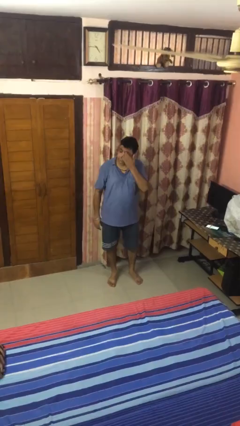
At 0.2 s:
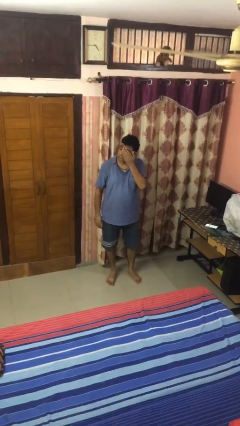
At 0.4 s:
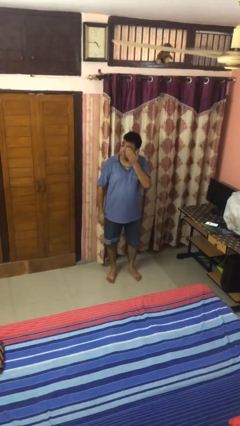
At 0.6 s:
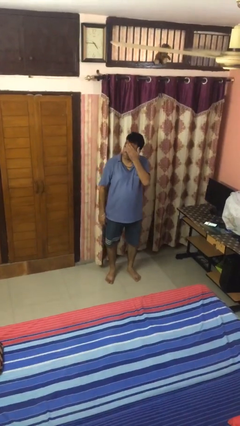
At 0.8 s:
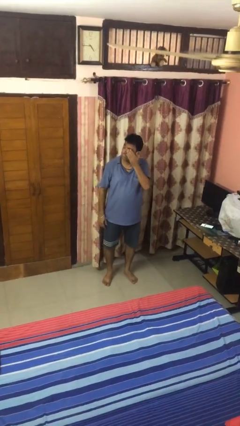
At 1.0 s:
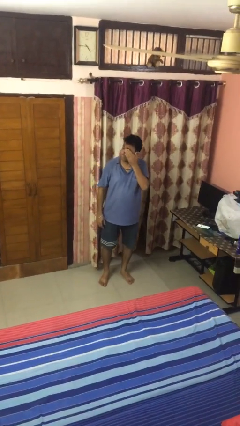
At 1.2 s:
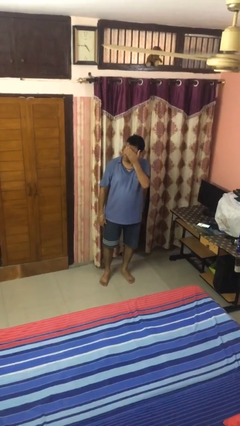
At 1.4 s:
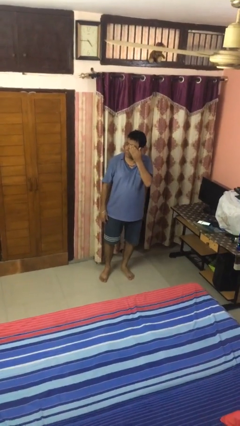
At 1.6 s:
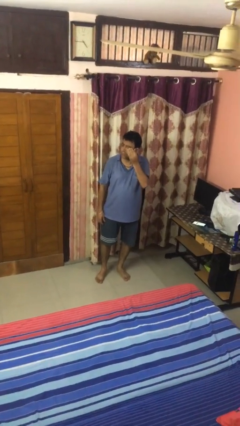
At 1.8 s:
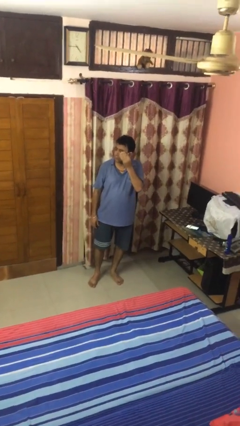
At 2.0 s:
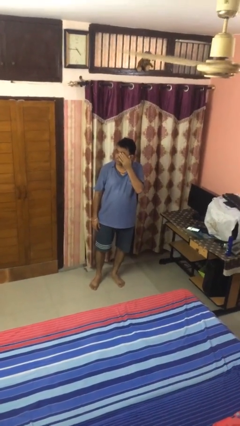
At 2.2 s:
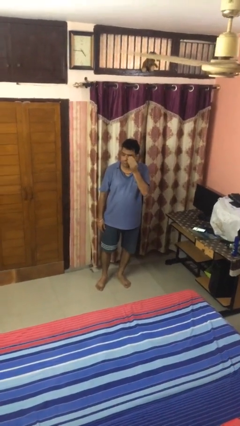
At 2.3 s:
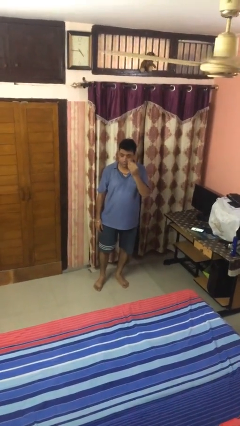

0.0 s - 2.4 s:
person rubs eyes

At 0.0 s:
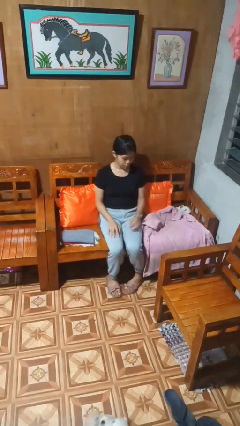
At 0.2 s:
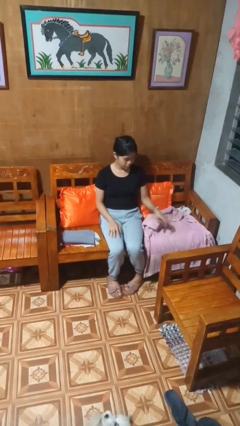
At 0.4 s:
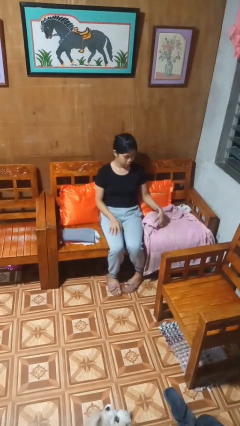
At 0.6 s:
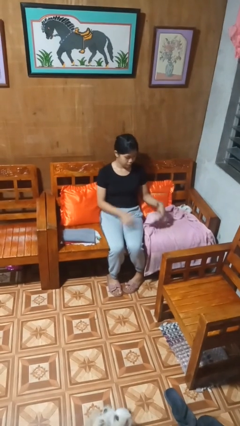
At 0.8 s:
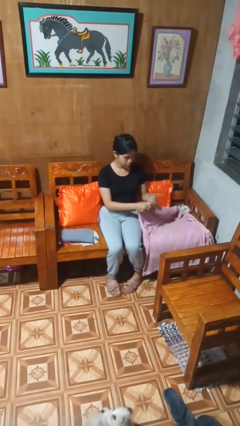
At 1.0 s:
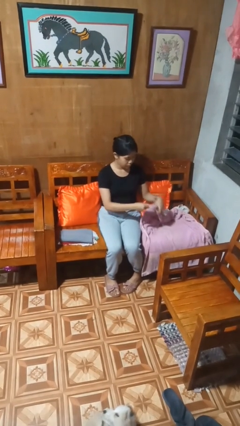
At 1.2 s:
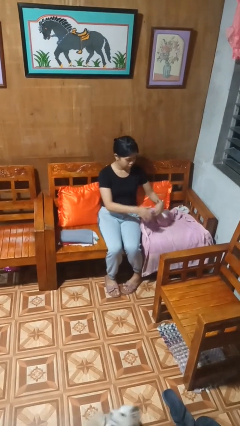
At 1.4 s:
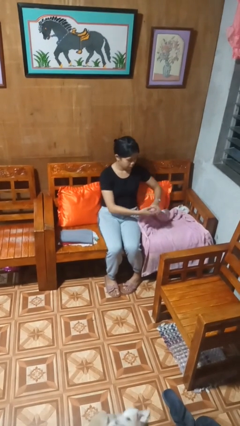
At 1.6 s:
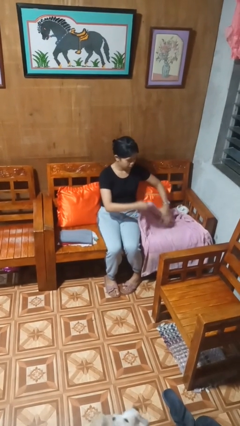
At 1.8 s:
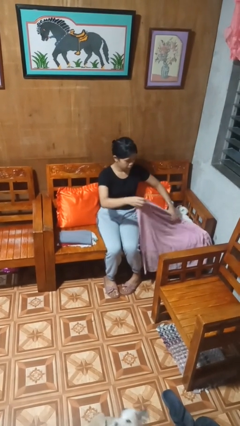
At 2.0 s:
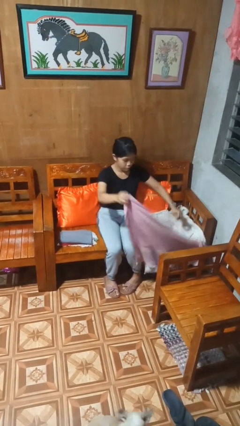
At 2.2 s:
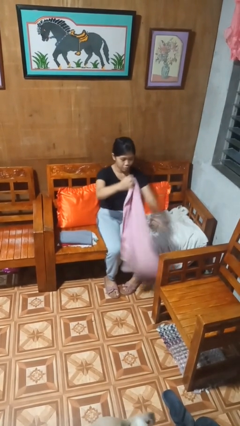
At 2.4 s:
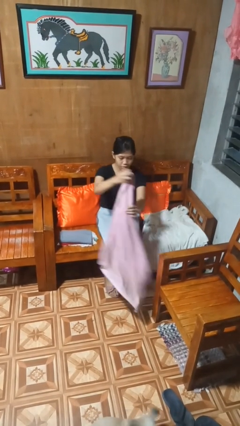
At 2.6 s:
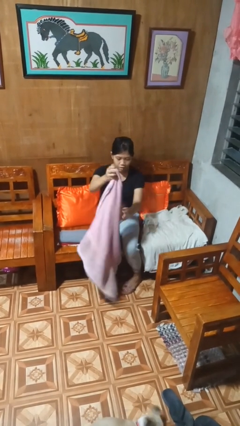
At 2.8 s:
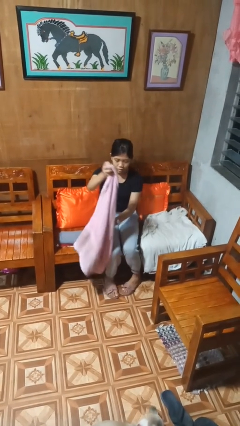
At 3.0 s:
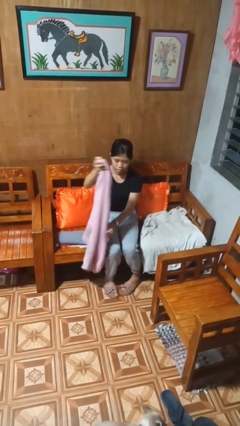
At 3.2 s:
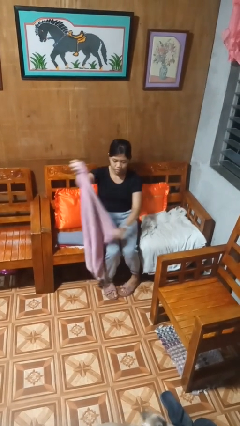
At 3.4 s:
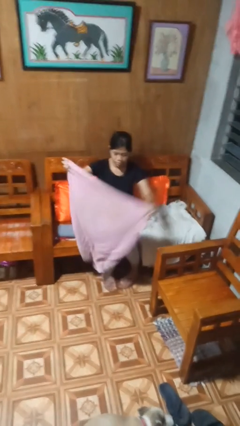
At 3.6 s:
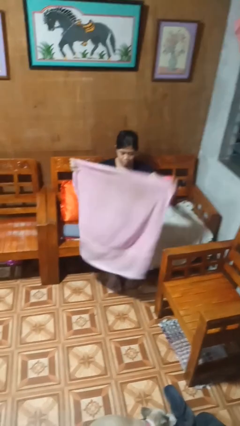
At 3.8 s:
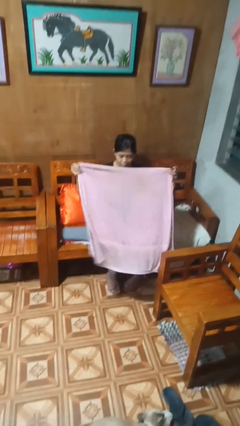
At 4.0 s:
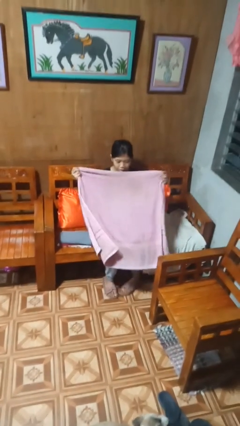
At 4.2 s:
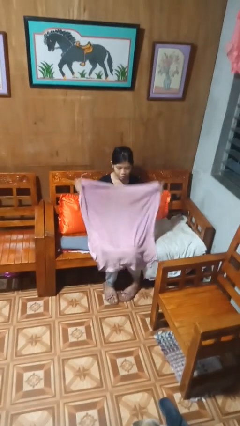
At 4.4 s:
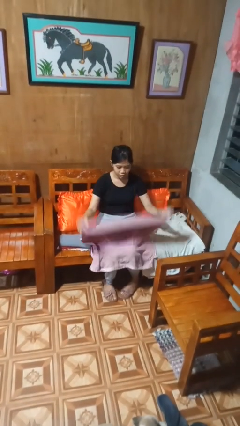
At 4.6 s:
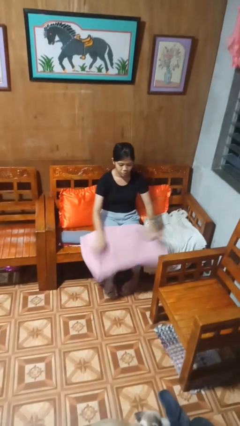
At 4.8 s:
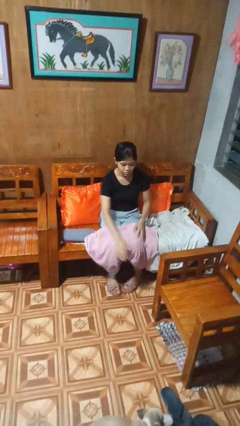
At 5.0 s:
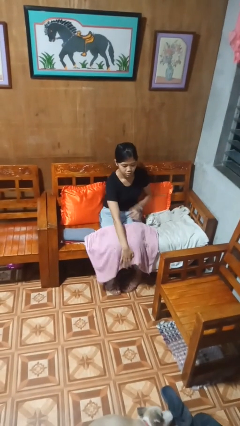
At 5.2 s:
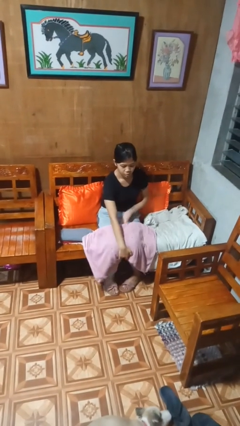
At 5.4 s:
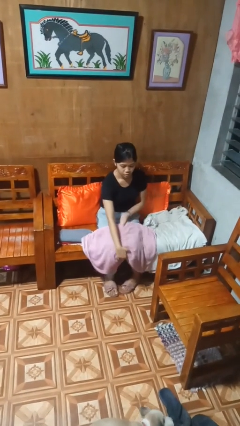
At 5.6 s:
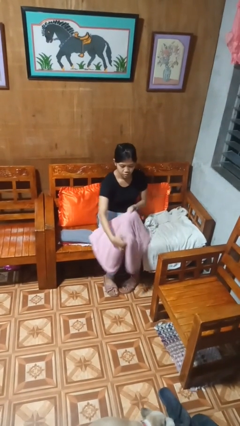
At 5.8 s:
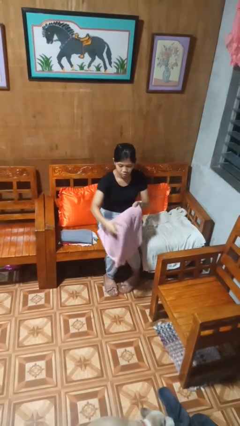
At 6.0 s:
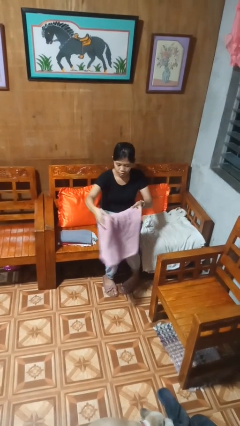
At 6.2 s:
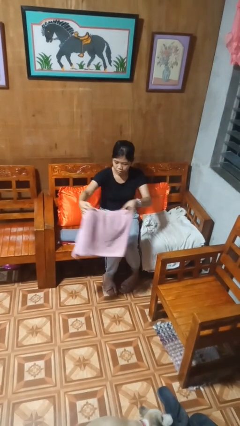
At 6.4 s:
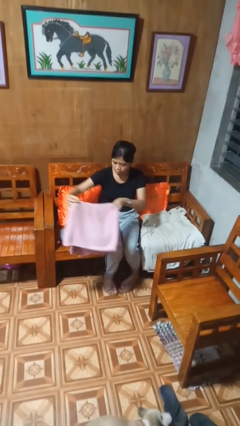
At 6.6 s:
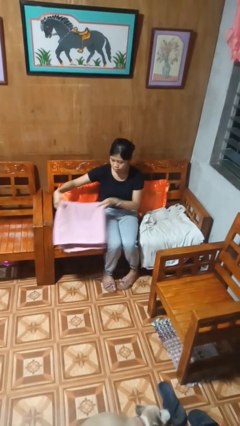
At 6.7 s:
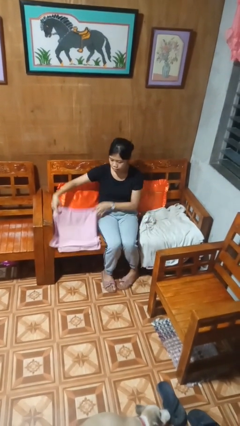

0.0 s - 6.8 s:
person folds towel

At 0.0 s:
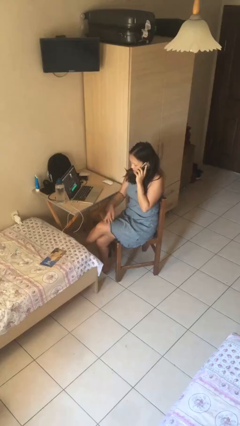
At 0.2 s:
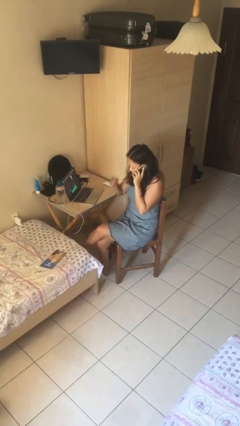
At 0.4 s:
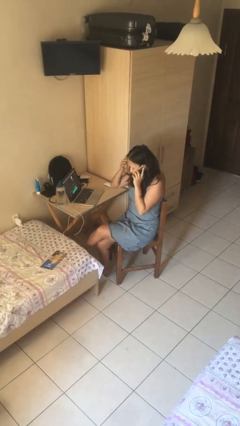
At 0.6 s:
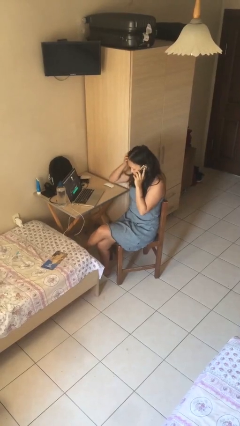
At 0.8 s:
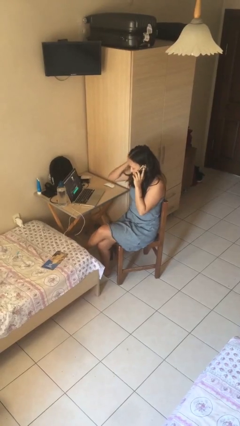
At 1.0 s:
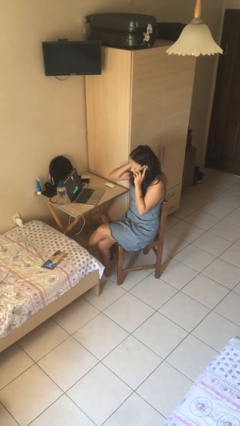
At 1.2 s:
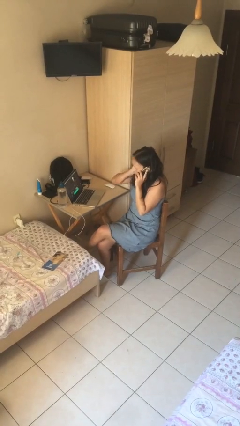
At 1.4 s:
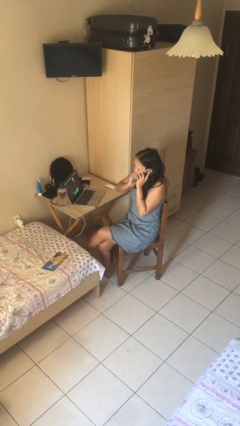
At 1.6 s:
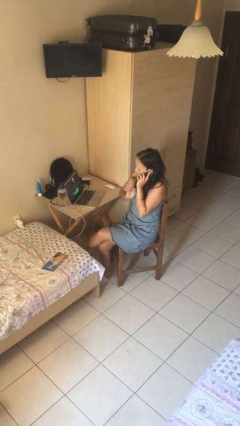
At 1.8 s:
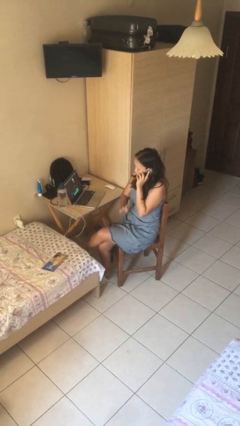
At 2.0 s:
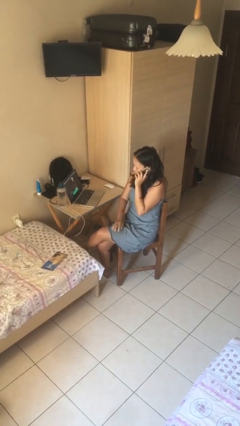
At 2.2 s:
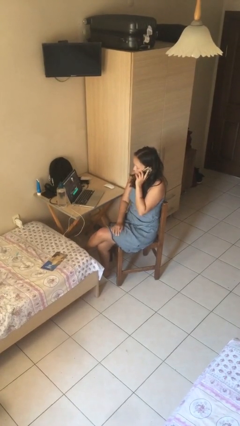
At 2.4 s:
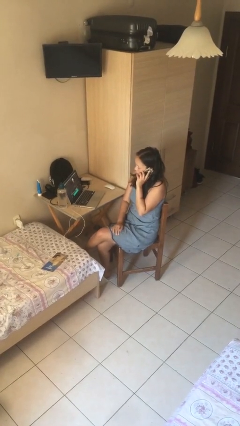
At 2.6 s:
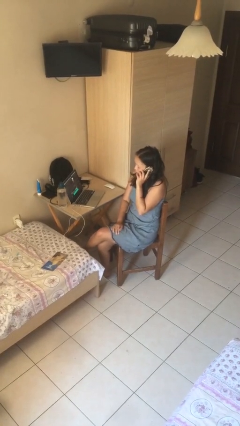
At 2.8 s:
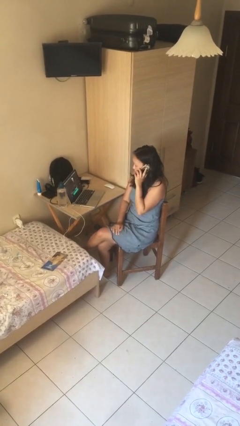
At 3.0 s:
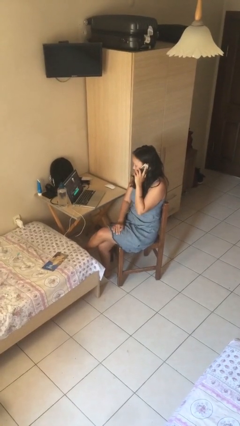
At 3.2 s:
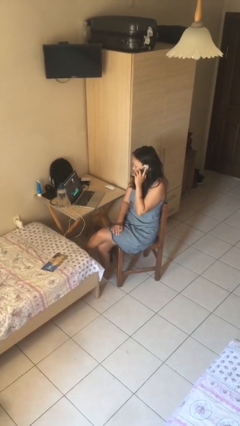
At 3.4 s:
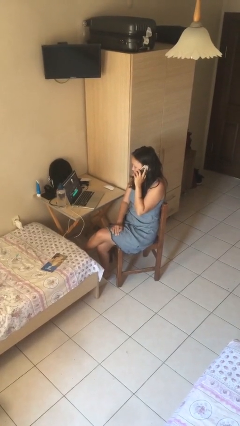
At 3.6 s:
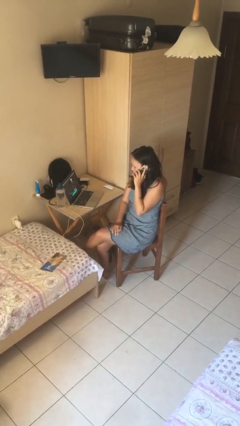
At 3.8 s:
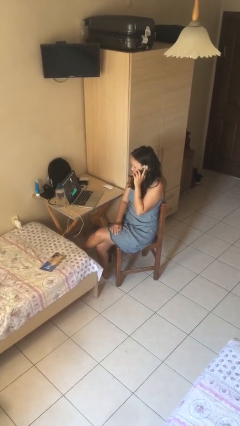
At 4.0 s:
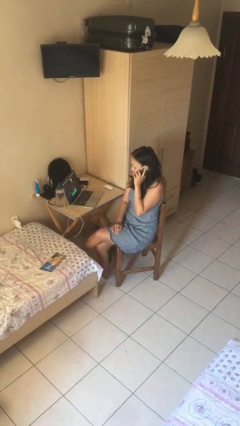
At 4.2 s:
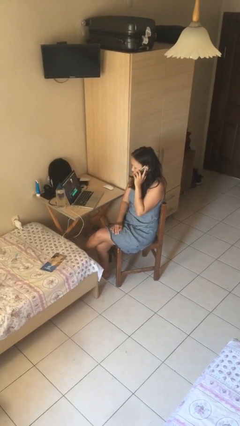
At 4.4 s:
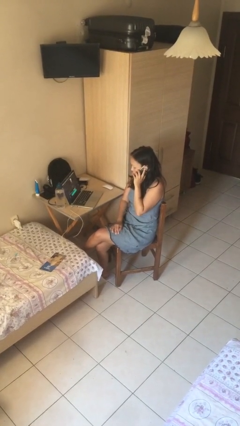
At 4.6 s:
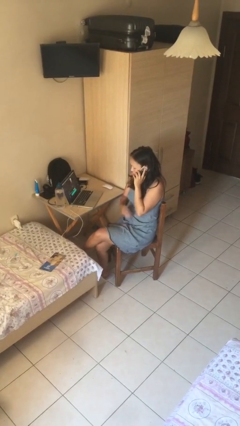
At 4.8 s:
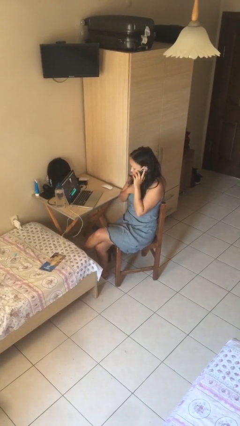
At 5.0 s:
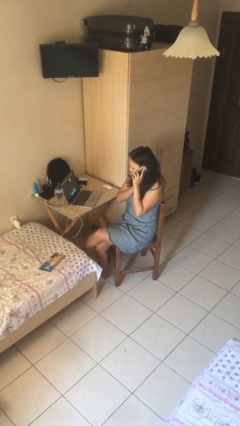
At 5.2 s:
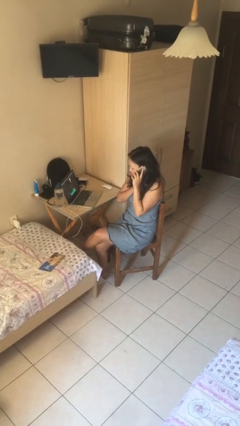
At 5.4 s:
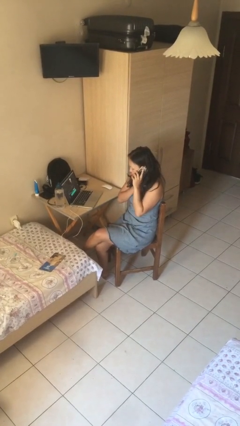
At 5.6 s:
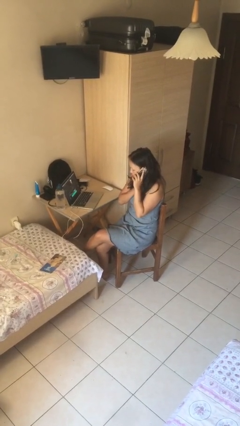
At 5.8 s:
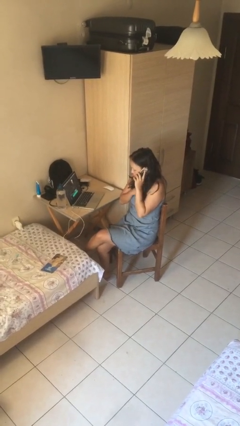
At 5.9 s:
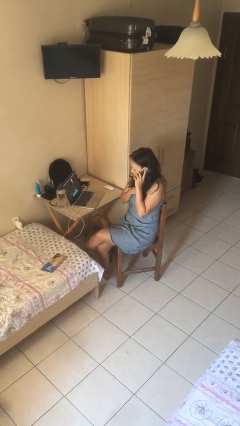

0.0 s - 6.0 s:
person talks on phone

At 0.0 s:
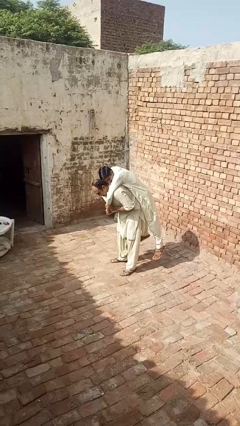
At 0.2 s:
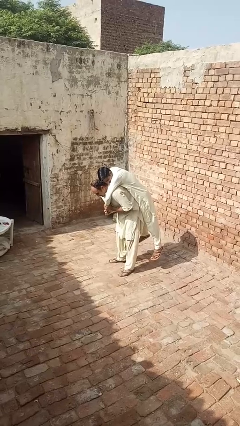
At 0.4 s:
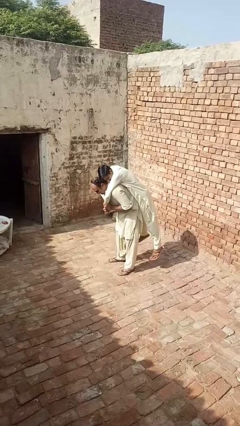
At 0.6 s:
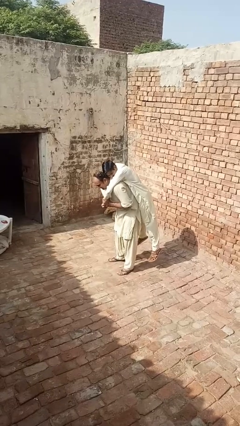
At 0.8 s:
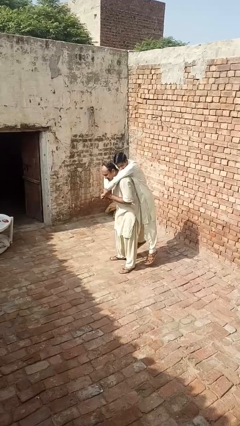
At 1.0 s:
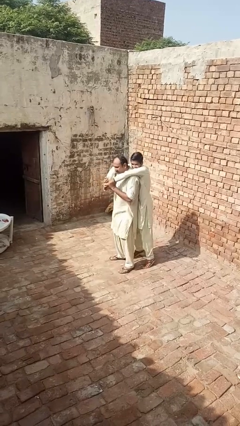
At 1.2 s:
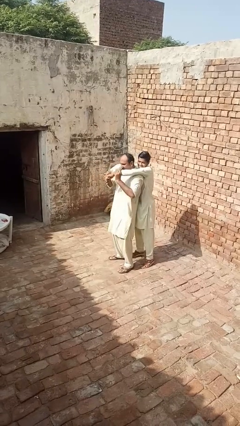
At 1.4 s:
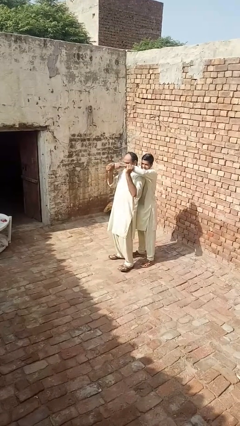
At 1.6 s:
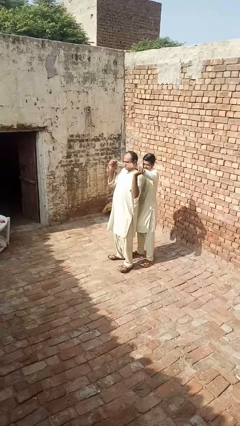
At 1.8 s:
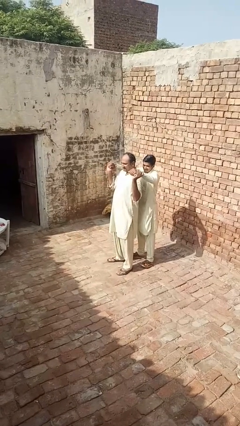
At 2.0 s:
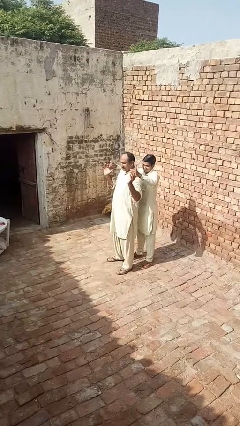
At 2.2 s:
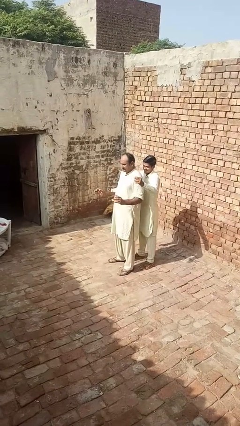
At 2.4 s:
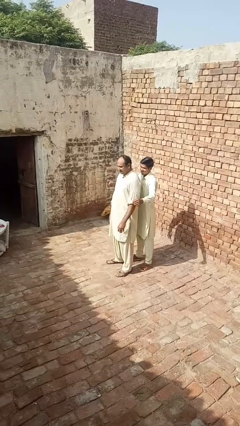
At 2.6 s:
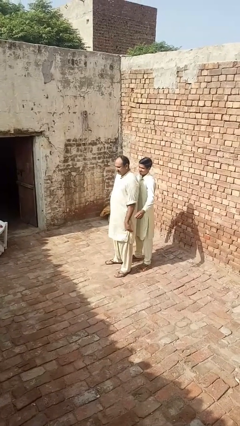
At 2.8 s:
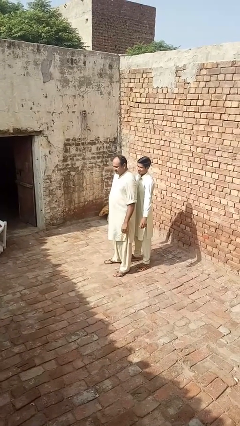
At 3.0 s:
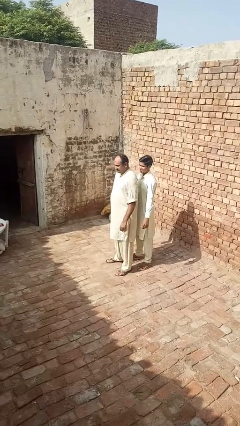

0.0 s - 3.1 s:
person puts down person
